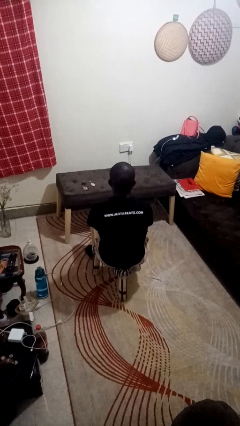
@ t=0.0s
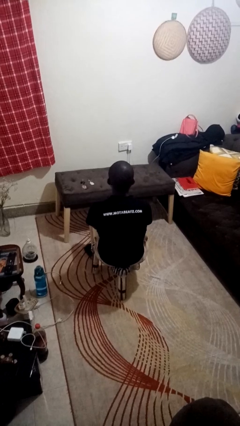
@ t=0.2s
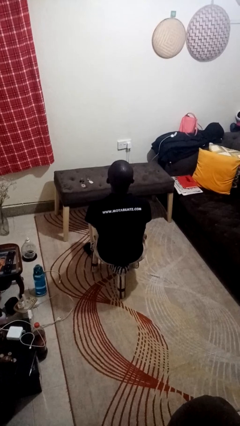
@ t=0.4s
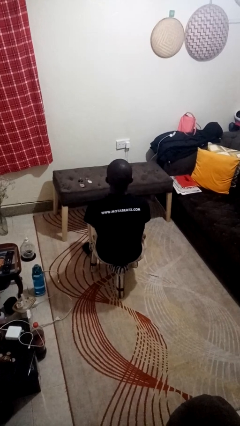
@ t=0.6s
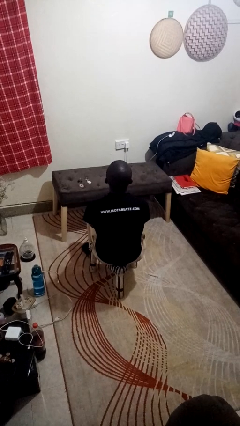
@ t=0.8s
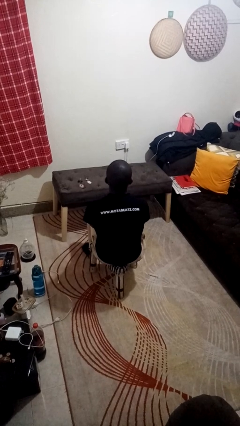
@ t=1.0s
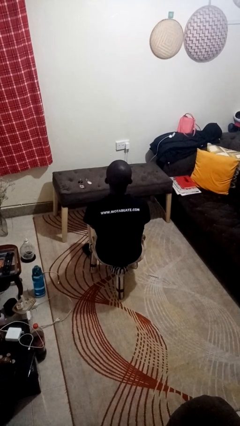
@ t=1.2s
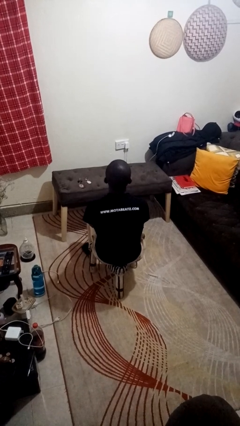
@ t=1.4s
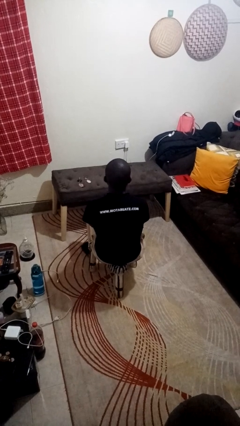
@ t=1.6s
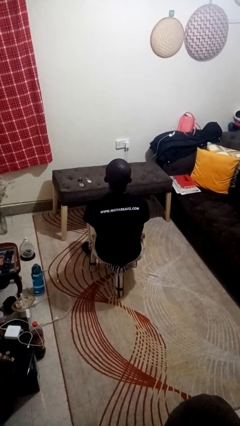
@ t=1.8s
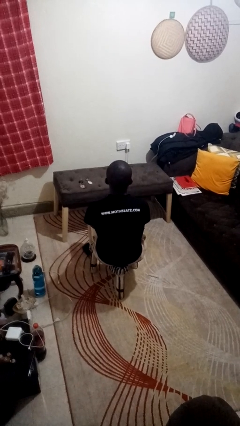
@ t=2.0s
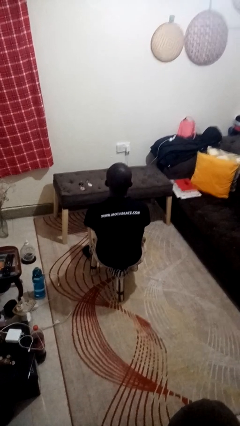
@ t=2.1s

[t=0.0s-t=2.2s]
person nods head

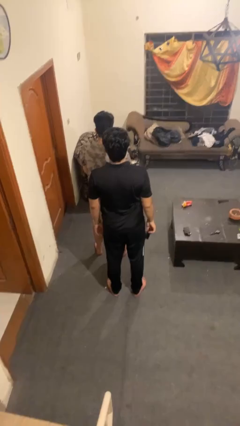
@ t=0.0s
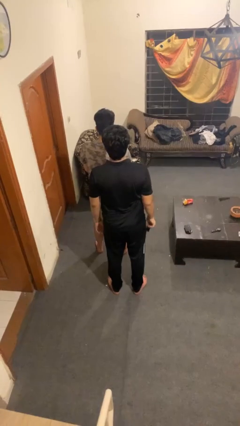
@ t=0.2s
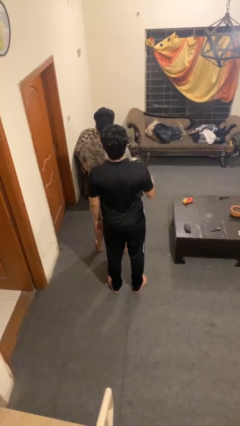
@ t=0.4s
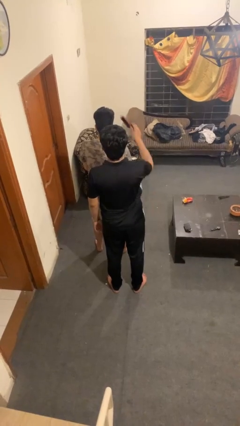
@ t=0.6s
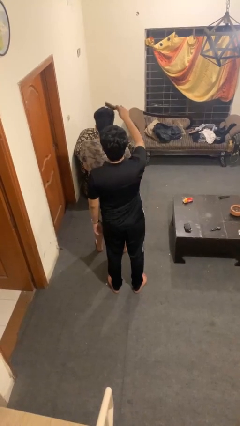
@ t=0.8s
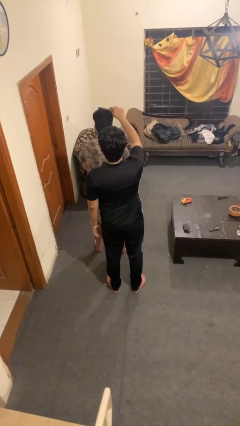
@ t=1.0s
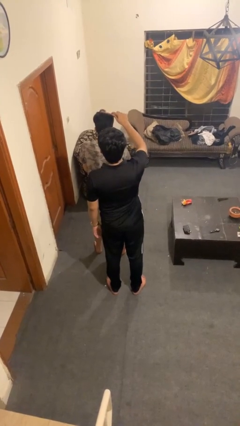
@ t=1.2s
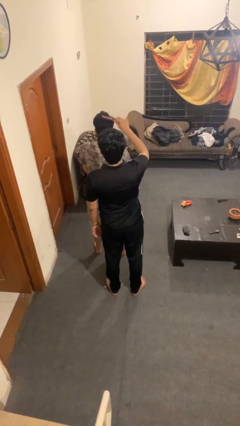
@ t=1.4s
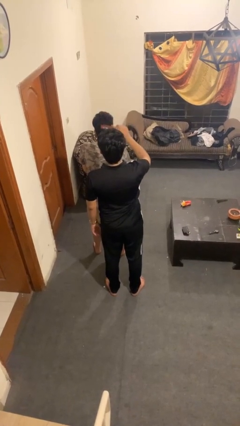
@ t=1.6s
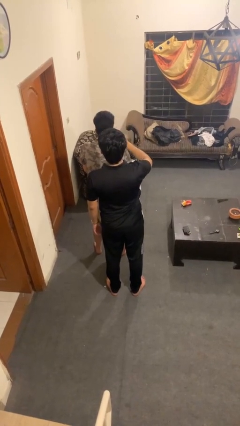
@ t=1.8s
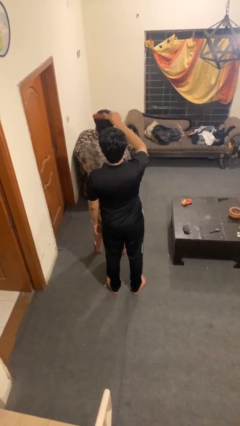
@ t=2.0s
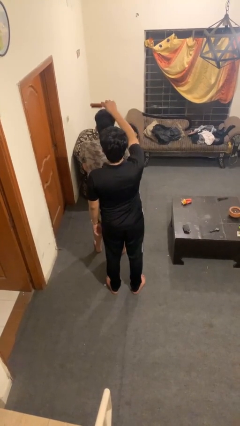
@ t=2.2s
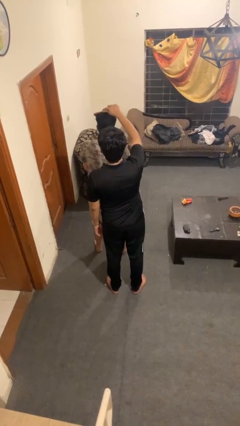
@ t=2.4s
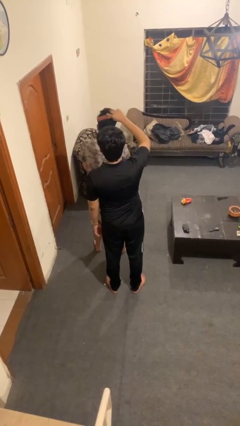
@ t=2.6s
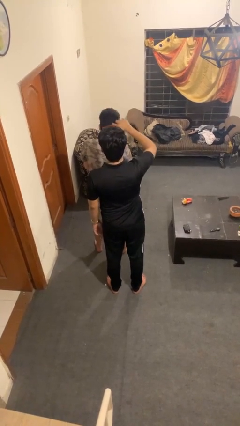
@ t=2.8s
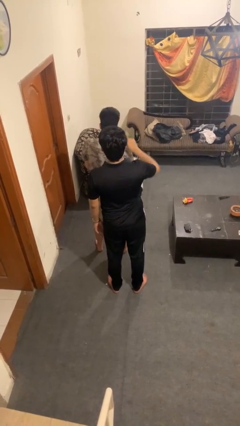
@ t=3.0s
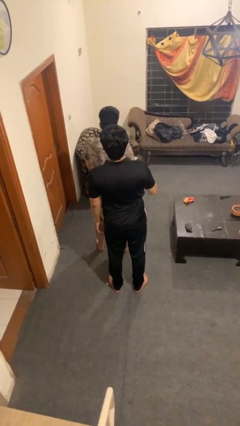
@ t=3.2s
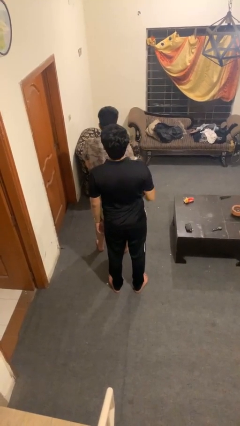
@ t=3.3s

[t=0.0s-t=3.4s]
person brushes hair of person

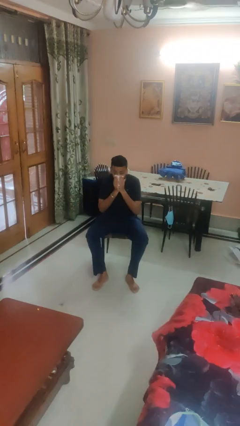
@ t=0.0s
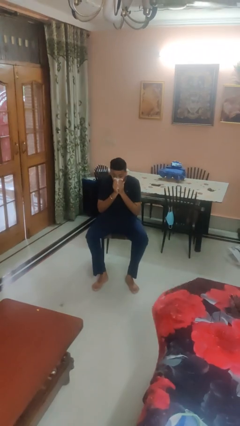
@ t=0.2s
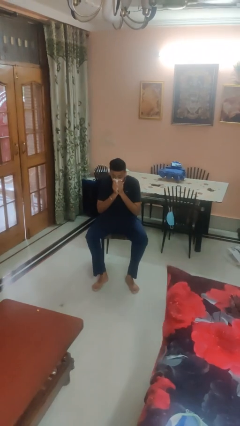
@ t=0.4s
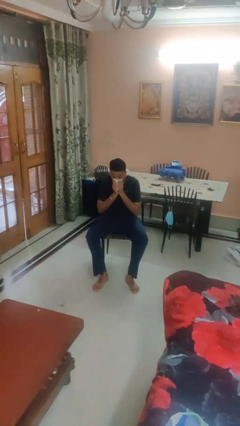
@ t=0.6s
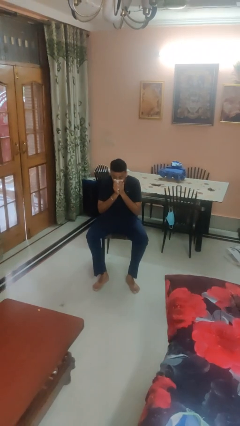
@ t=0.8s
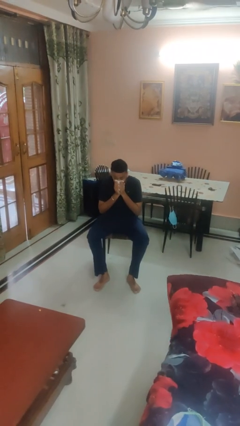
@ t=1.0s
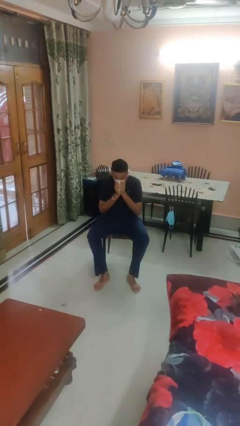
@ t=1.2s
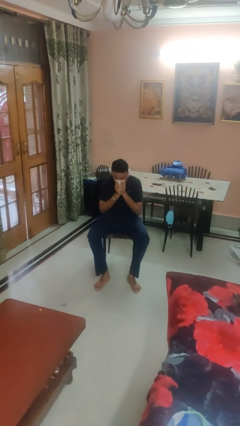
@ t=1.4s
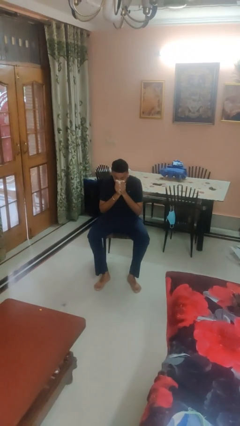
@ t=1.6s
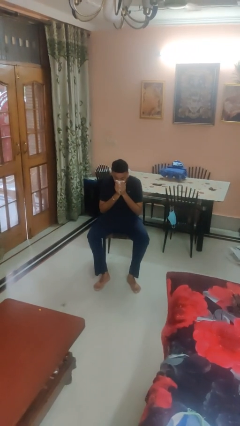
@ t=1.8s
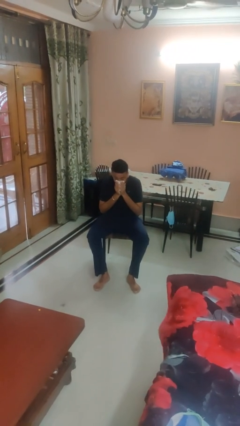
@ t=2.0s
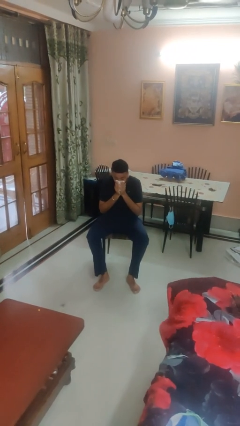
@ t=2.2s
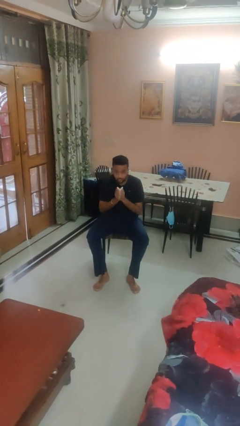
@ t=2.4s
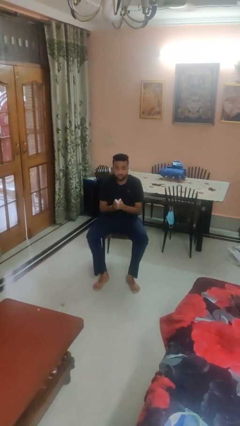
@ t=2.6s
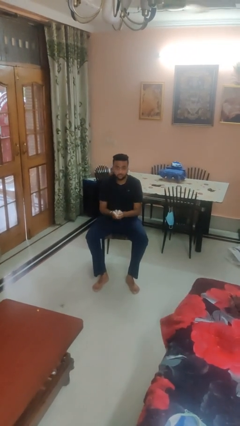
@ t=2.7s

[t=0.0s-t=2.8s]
person blows nose

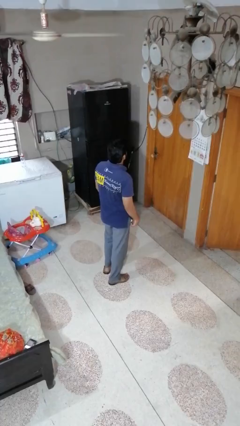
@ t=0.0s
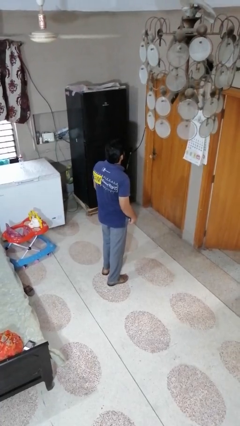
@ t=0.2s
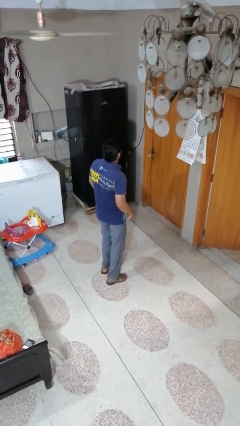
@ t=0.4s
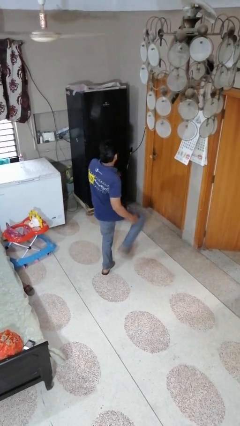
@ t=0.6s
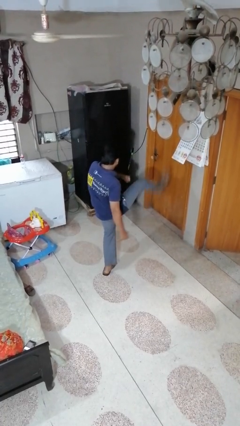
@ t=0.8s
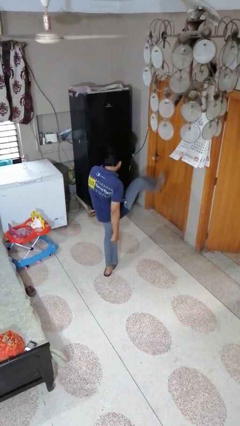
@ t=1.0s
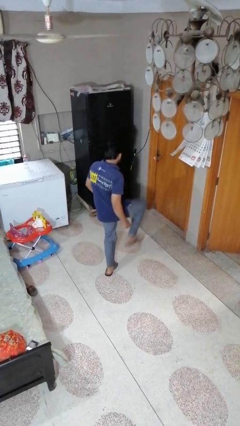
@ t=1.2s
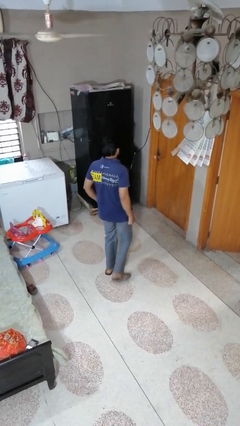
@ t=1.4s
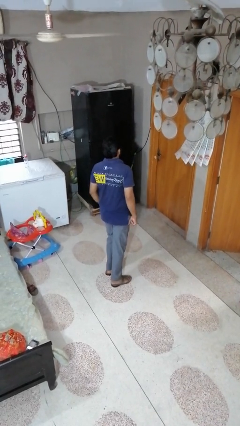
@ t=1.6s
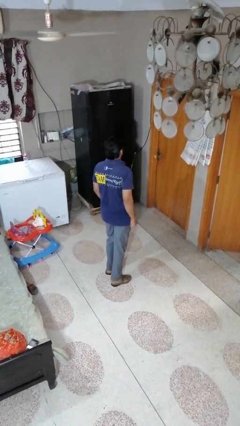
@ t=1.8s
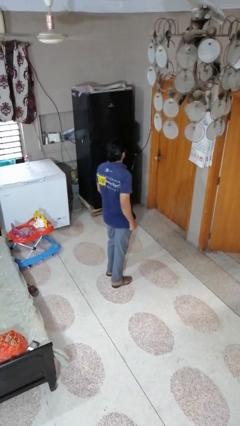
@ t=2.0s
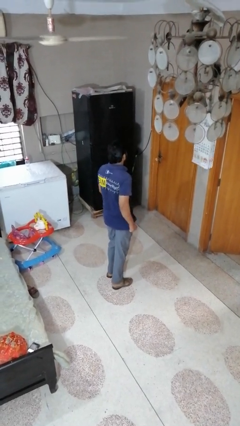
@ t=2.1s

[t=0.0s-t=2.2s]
person karate kicks

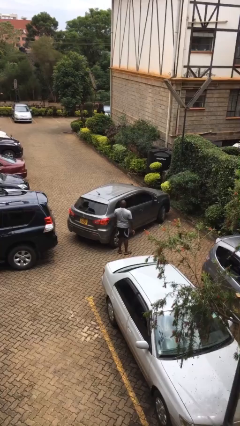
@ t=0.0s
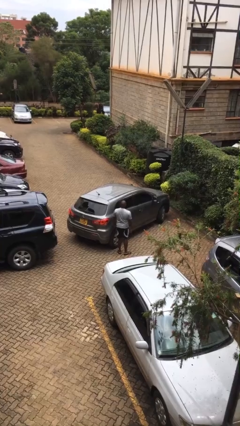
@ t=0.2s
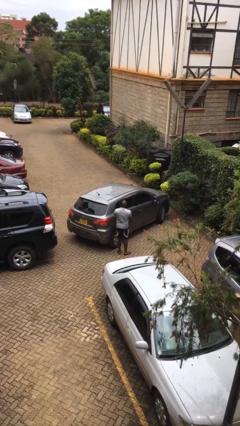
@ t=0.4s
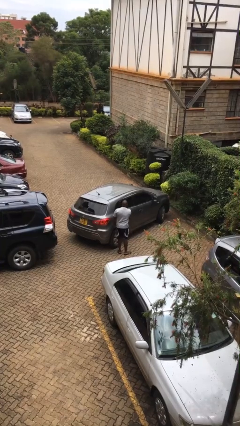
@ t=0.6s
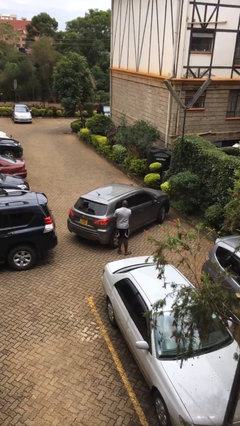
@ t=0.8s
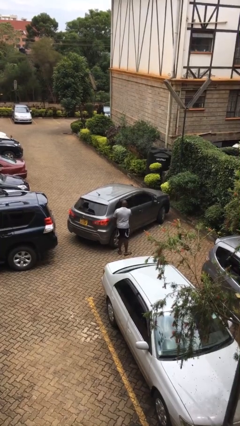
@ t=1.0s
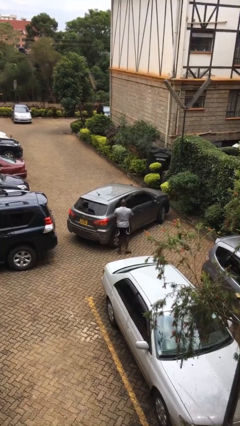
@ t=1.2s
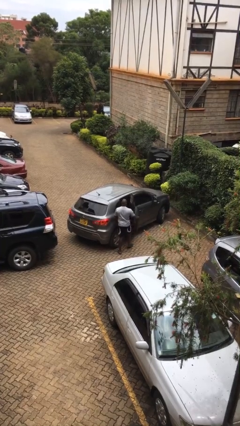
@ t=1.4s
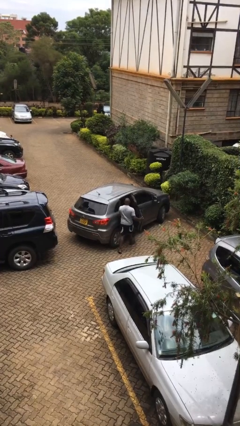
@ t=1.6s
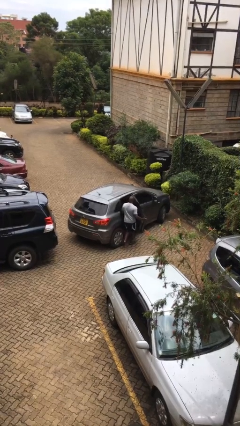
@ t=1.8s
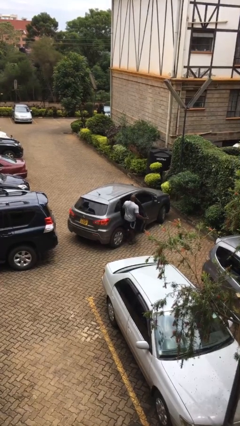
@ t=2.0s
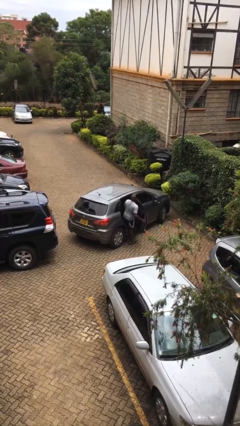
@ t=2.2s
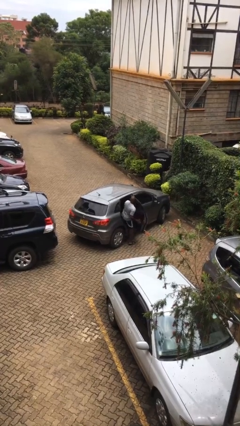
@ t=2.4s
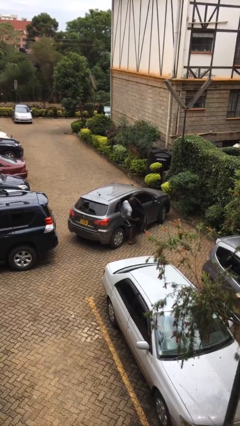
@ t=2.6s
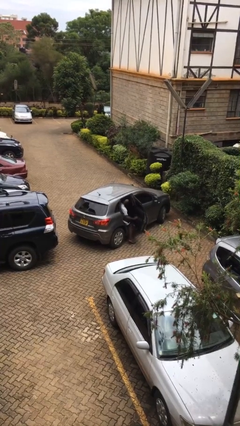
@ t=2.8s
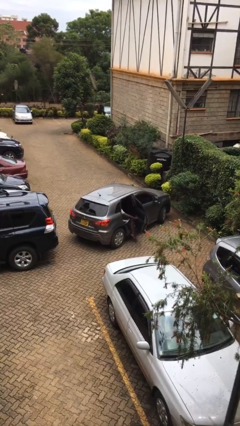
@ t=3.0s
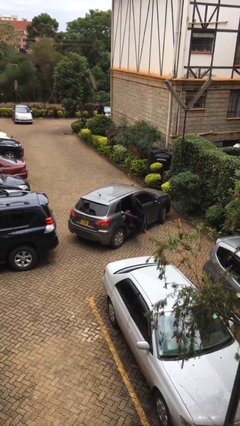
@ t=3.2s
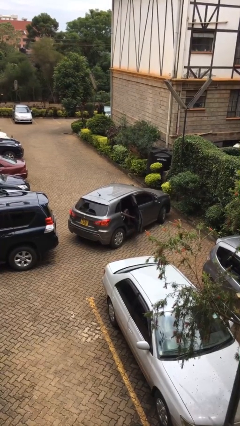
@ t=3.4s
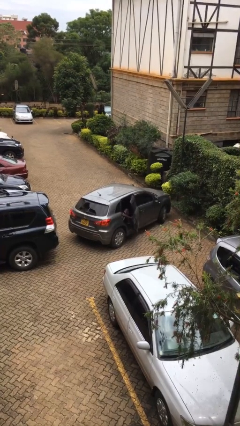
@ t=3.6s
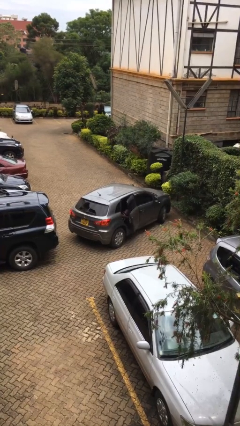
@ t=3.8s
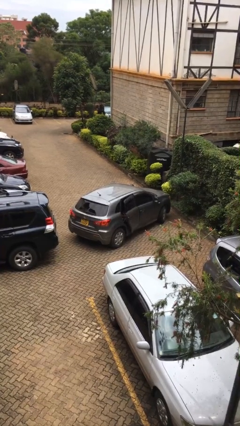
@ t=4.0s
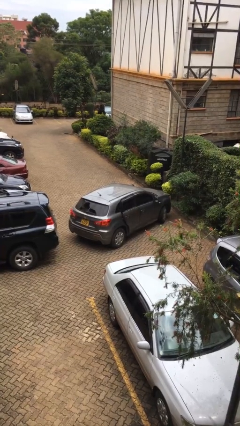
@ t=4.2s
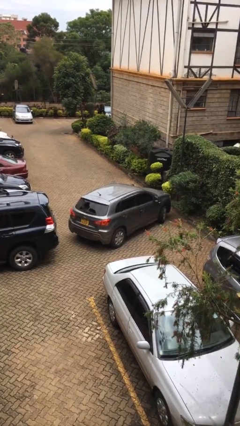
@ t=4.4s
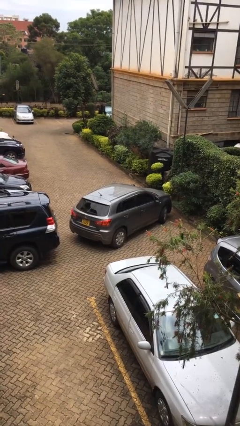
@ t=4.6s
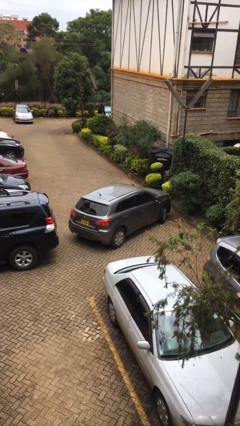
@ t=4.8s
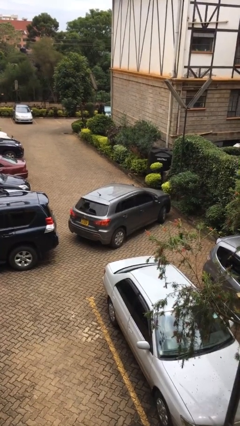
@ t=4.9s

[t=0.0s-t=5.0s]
car picks up person

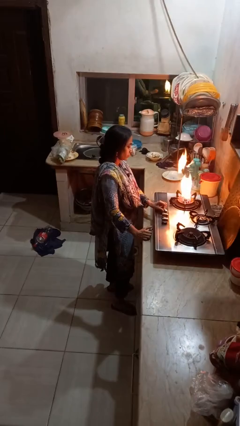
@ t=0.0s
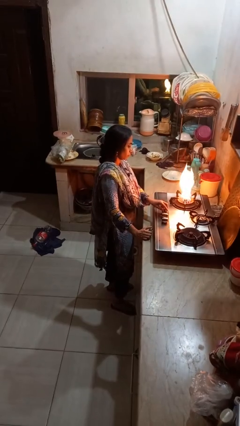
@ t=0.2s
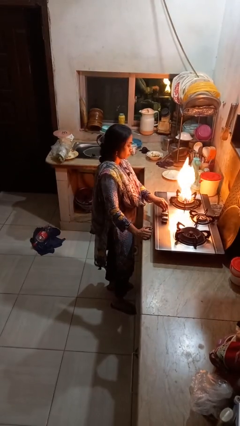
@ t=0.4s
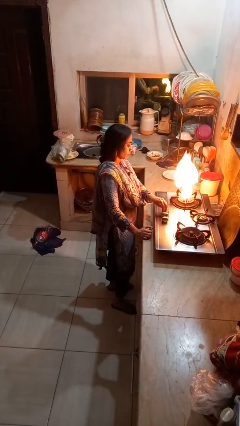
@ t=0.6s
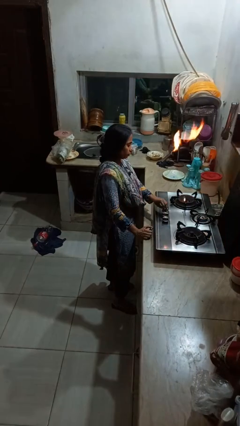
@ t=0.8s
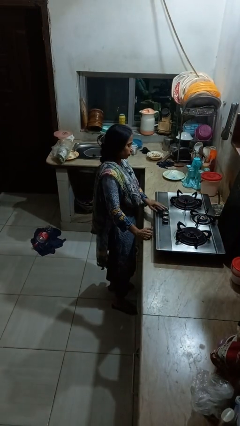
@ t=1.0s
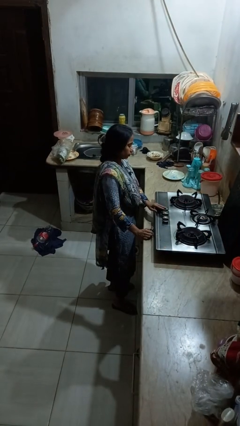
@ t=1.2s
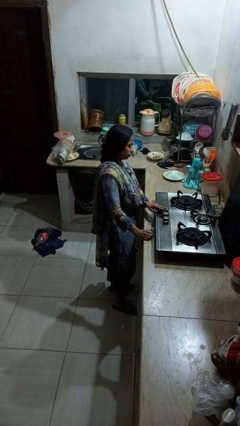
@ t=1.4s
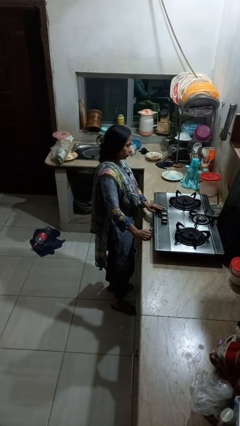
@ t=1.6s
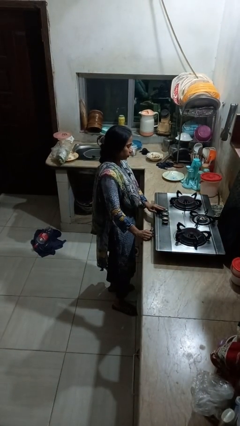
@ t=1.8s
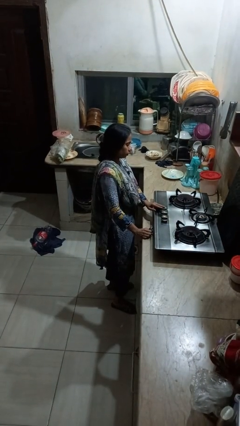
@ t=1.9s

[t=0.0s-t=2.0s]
person turns off stovetop
